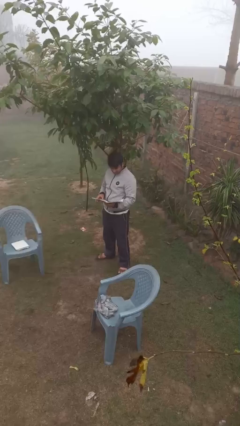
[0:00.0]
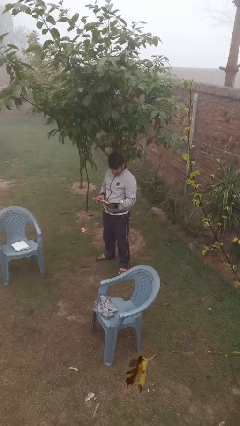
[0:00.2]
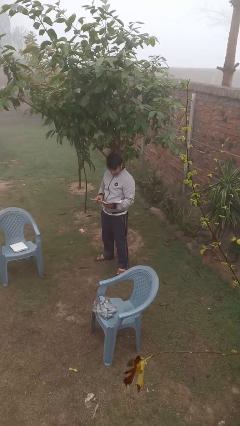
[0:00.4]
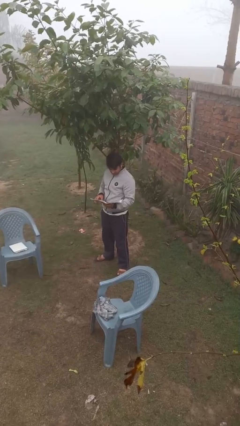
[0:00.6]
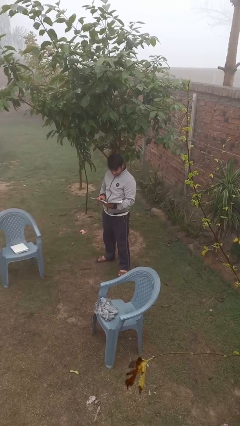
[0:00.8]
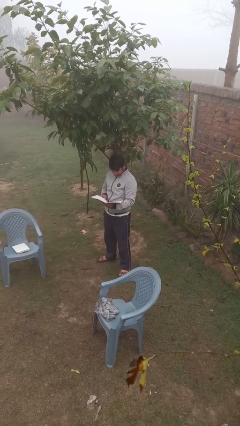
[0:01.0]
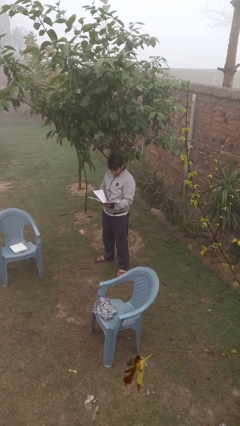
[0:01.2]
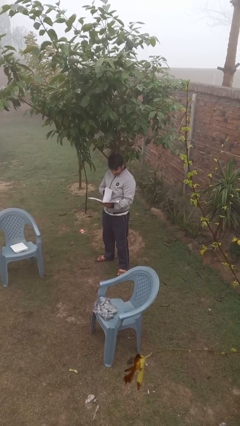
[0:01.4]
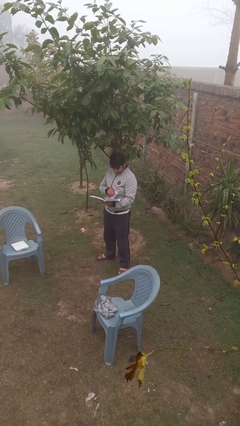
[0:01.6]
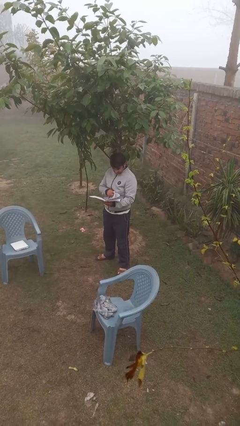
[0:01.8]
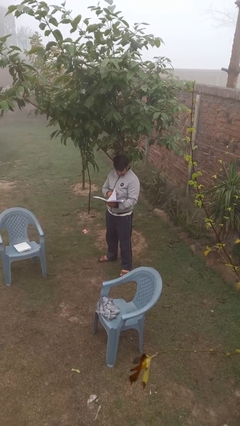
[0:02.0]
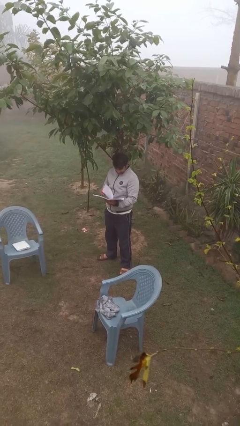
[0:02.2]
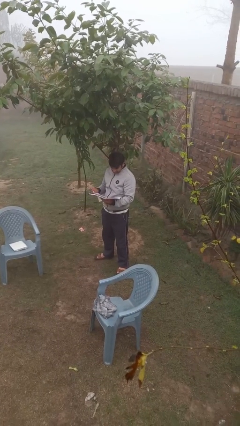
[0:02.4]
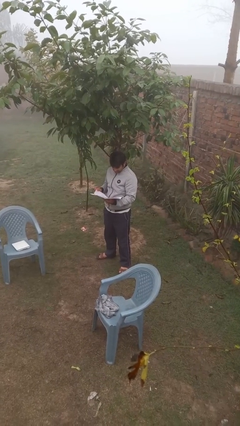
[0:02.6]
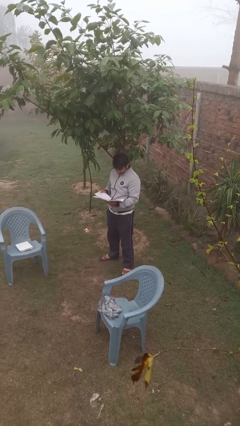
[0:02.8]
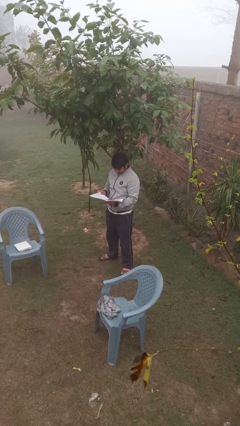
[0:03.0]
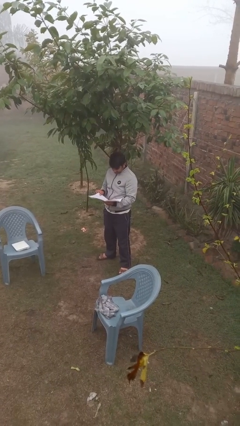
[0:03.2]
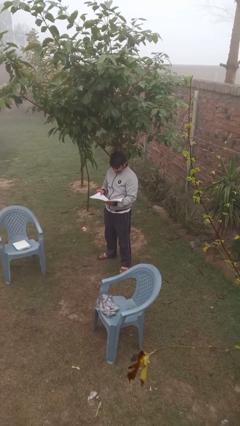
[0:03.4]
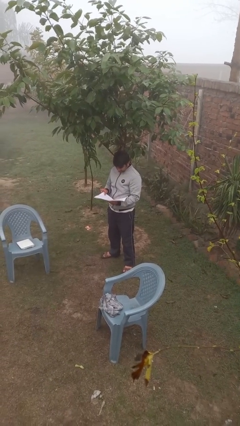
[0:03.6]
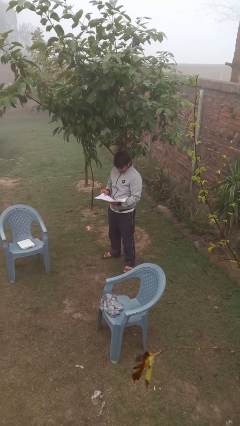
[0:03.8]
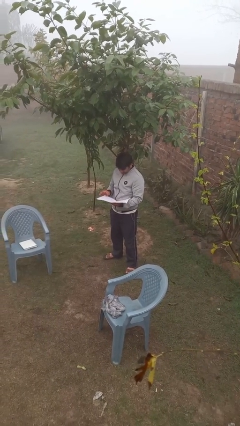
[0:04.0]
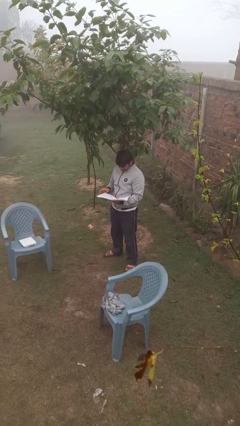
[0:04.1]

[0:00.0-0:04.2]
person reads document

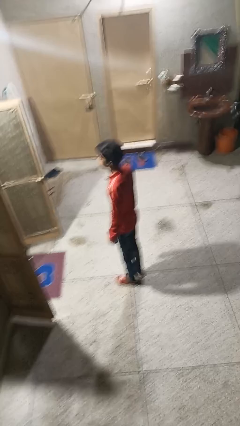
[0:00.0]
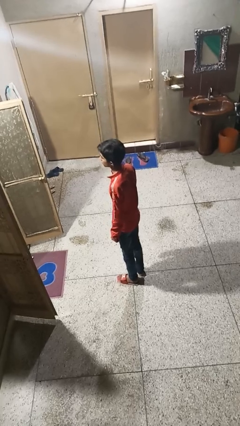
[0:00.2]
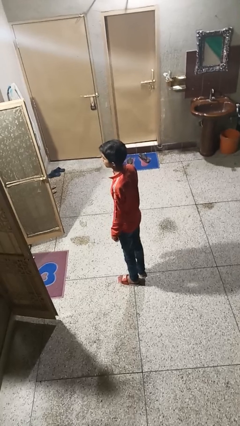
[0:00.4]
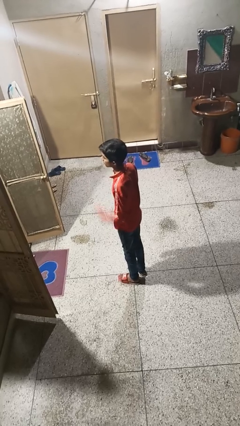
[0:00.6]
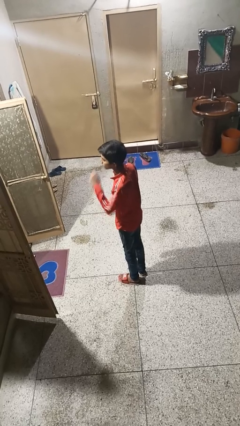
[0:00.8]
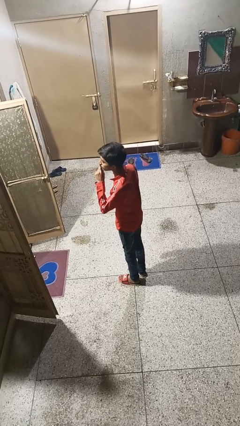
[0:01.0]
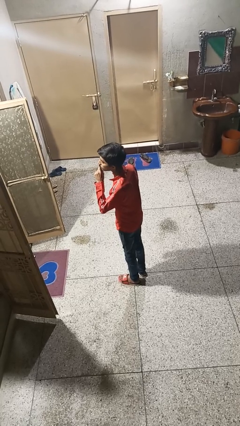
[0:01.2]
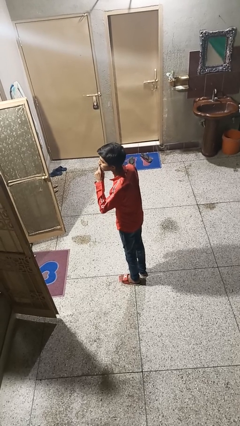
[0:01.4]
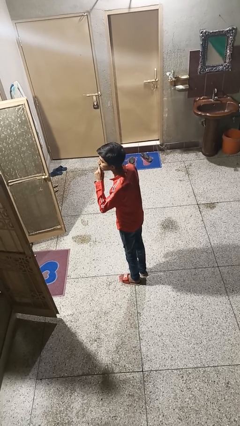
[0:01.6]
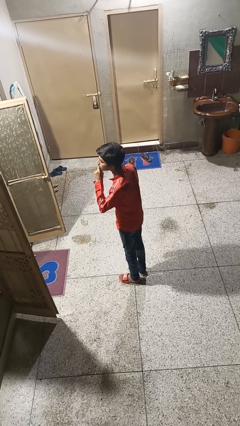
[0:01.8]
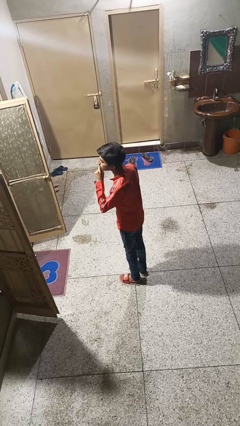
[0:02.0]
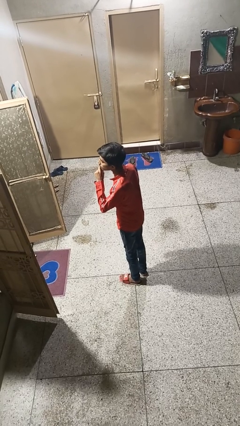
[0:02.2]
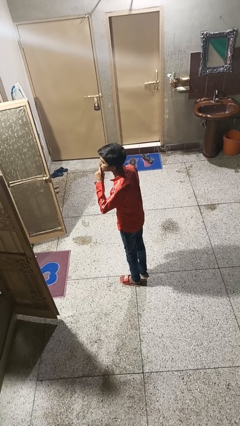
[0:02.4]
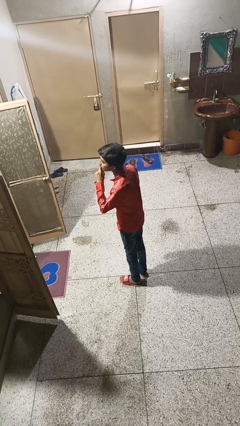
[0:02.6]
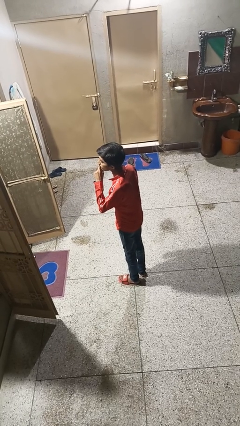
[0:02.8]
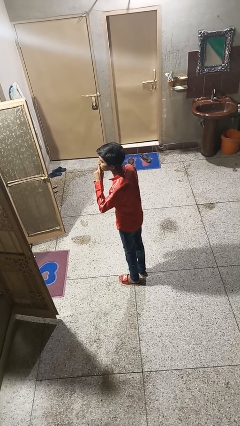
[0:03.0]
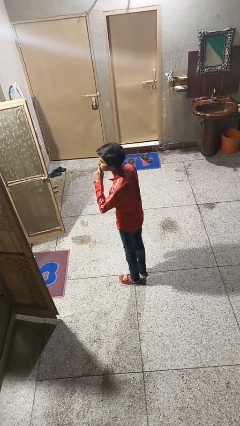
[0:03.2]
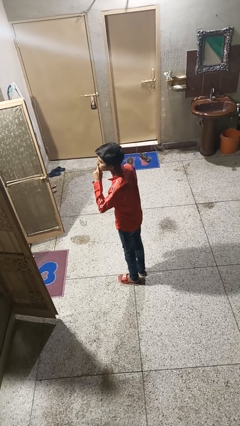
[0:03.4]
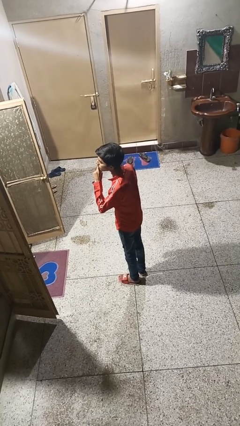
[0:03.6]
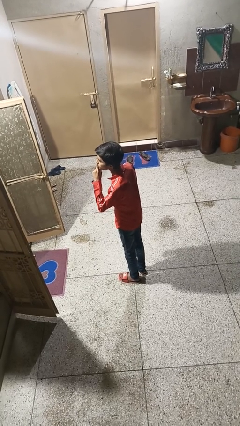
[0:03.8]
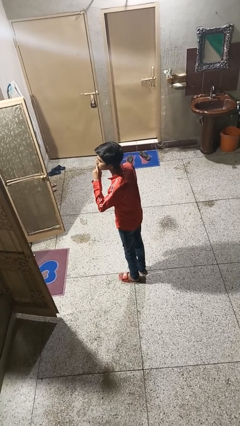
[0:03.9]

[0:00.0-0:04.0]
person gestures be quiet

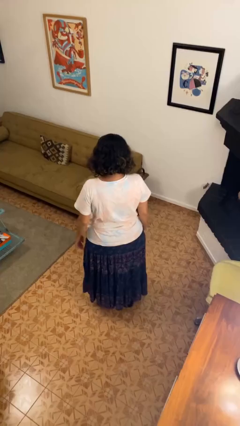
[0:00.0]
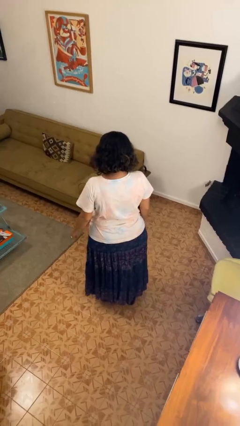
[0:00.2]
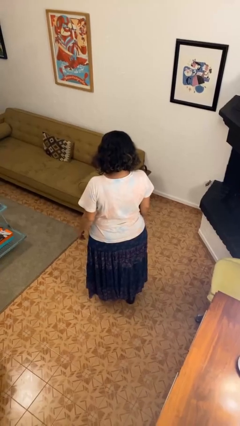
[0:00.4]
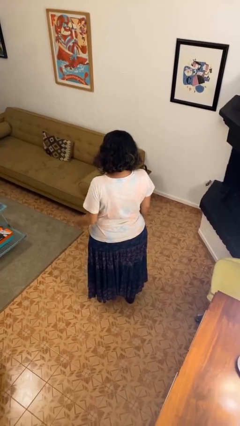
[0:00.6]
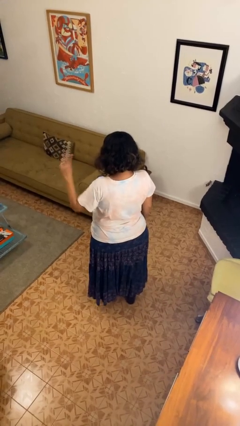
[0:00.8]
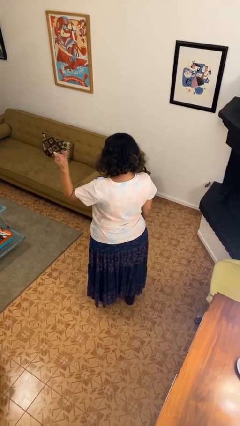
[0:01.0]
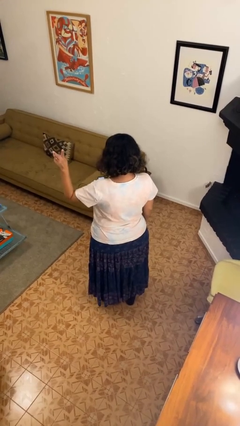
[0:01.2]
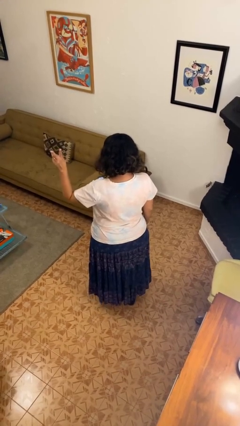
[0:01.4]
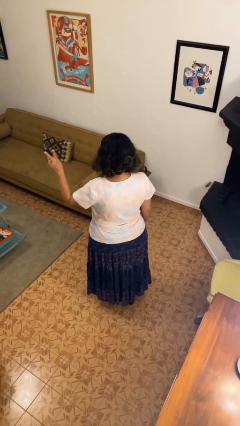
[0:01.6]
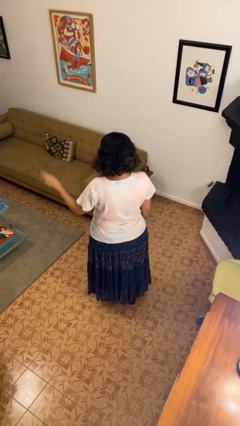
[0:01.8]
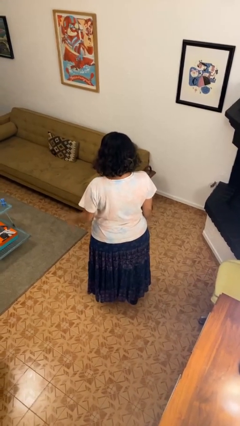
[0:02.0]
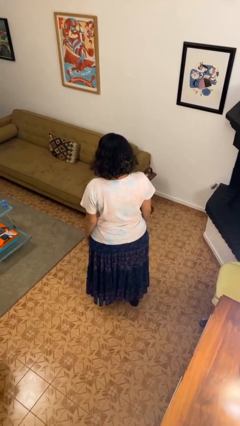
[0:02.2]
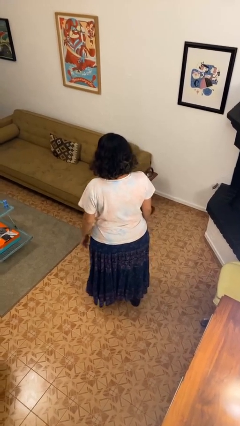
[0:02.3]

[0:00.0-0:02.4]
person gestures peace

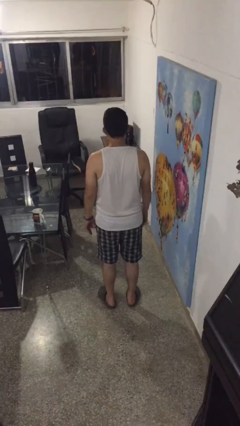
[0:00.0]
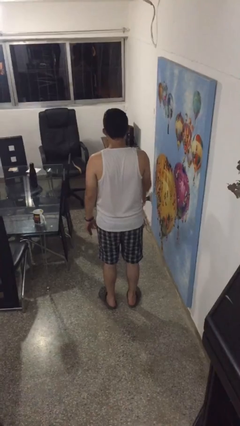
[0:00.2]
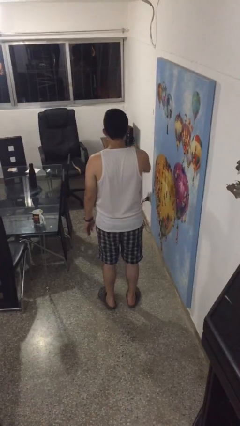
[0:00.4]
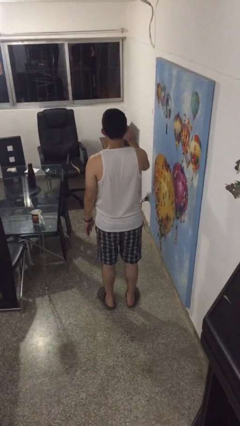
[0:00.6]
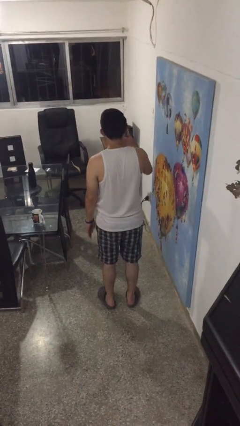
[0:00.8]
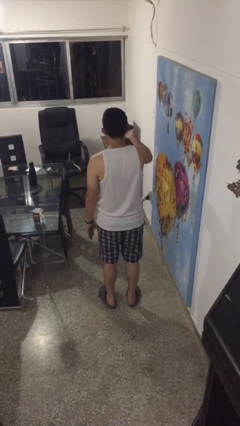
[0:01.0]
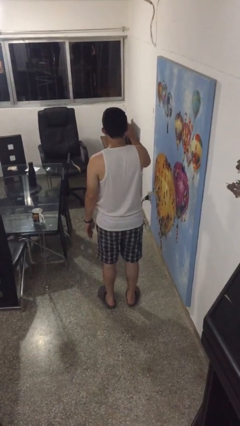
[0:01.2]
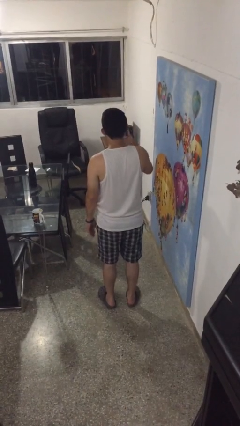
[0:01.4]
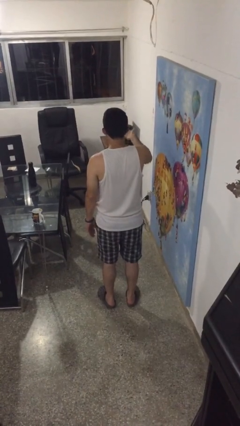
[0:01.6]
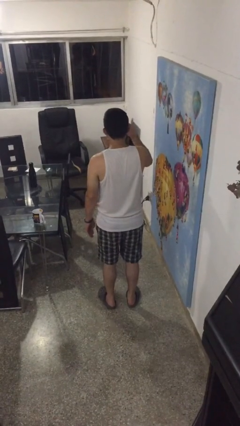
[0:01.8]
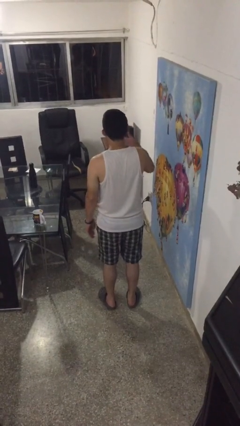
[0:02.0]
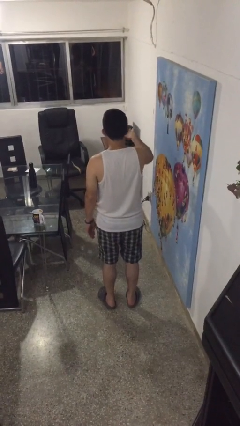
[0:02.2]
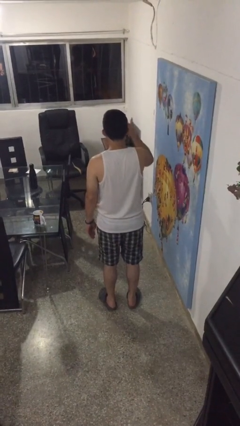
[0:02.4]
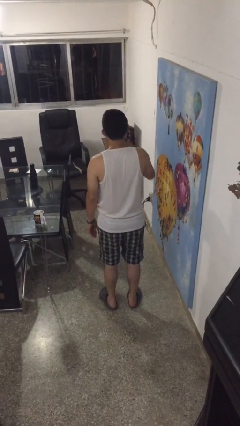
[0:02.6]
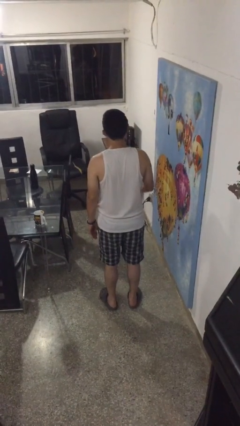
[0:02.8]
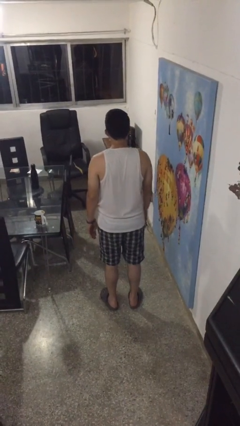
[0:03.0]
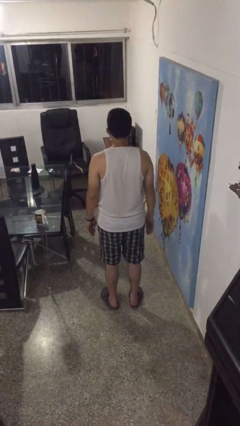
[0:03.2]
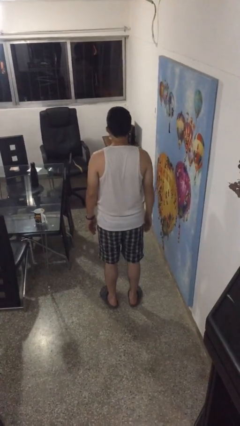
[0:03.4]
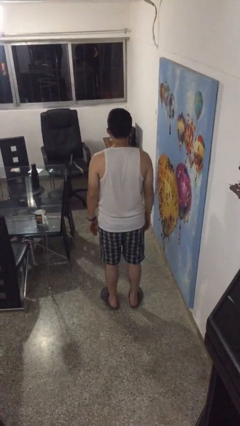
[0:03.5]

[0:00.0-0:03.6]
person gestures come here

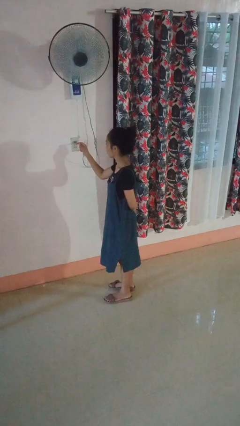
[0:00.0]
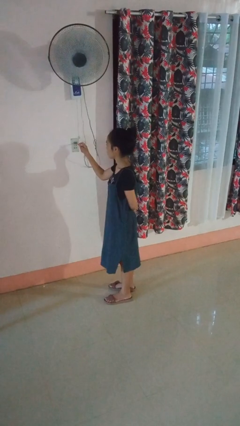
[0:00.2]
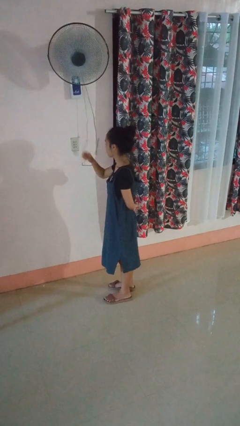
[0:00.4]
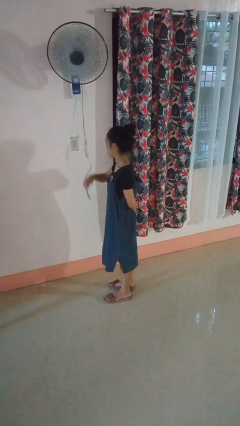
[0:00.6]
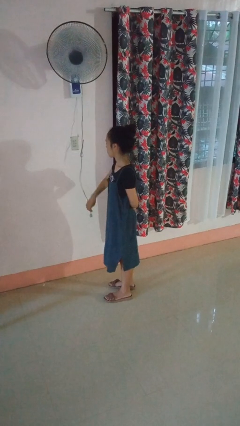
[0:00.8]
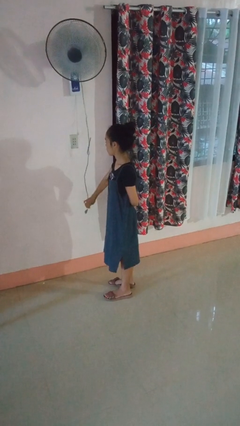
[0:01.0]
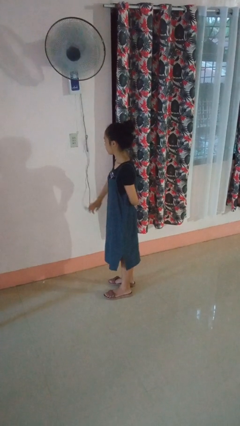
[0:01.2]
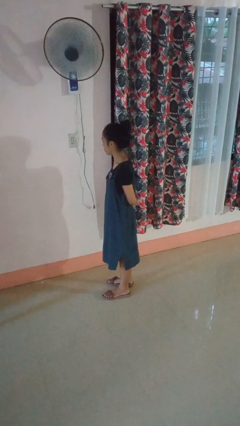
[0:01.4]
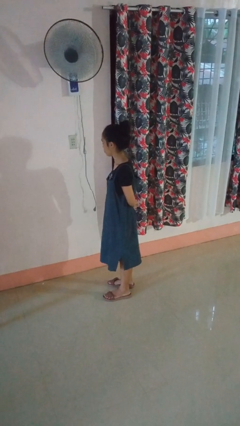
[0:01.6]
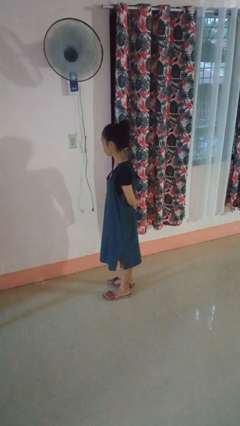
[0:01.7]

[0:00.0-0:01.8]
person unplugs from electrical socket

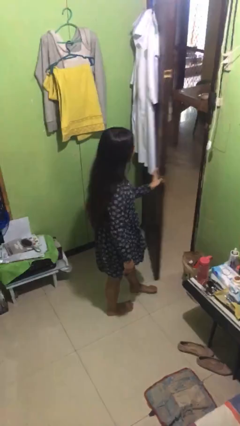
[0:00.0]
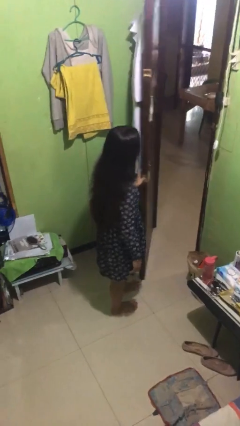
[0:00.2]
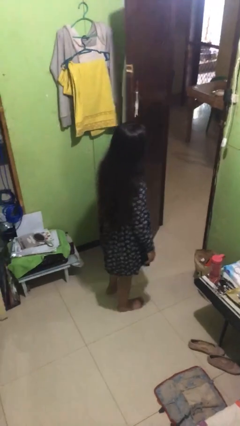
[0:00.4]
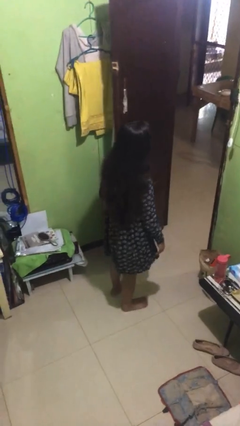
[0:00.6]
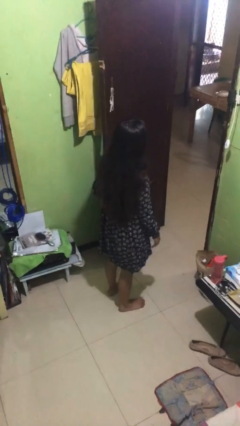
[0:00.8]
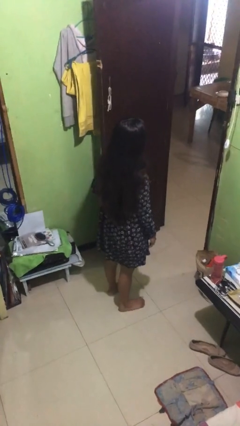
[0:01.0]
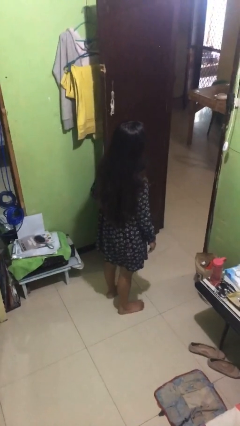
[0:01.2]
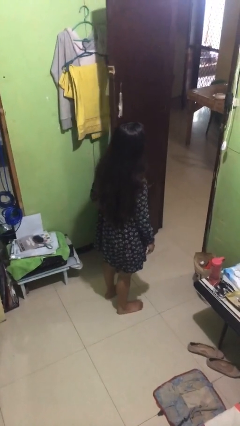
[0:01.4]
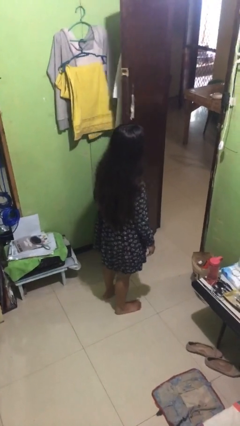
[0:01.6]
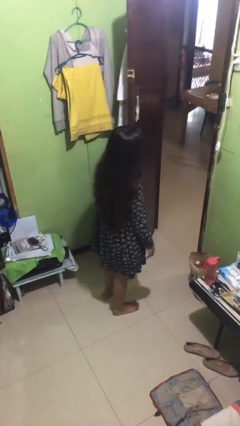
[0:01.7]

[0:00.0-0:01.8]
person opens facility door
